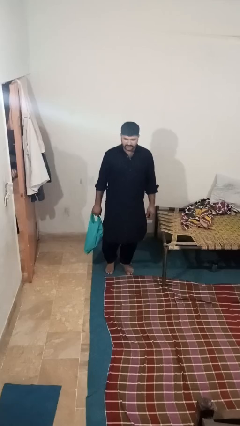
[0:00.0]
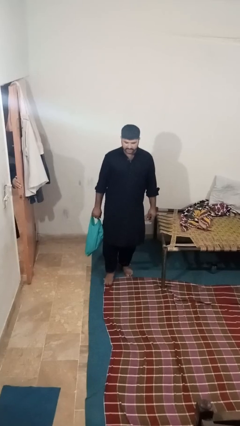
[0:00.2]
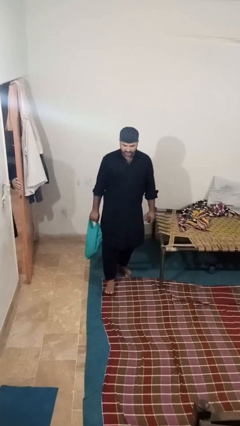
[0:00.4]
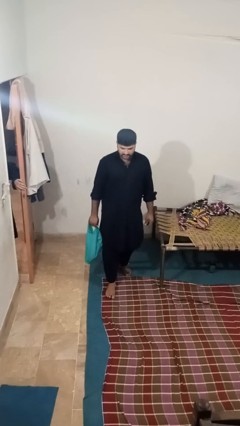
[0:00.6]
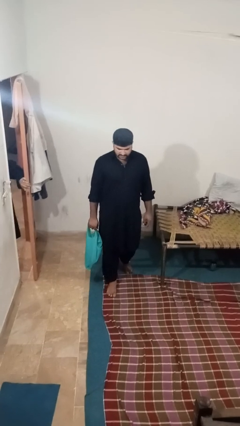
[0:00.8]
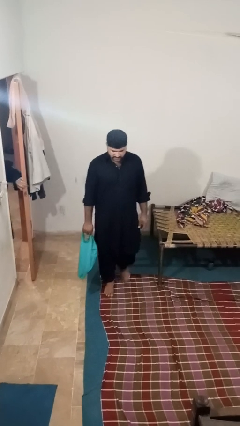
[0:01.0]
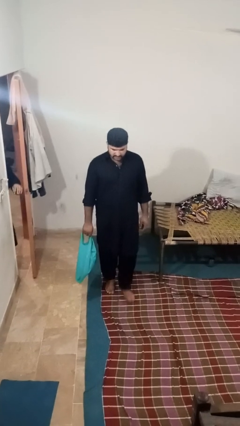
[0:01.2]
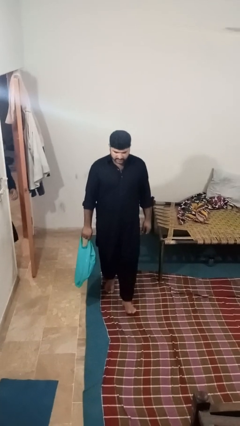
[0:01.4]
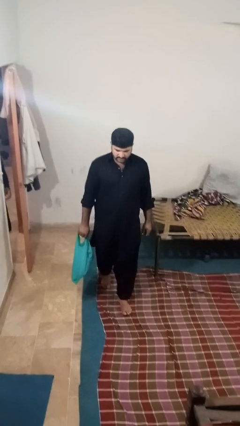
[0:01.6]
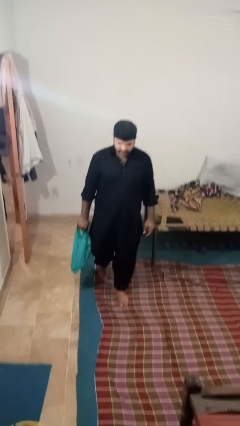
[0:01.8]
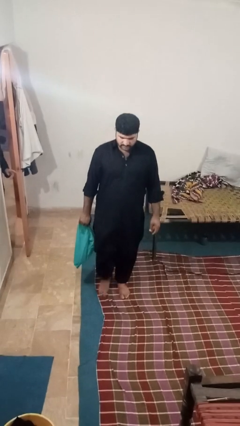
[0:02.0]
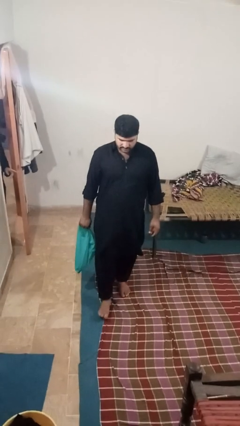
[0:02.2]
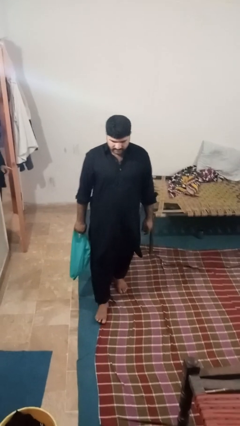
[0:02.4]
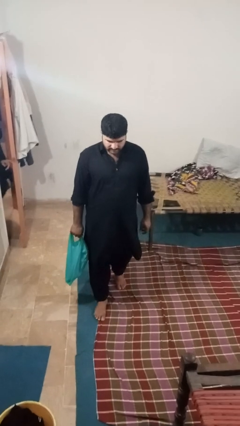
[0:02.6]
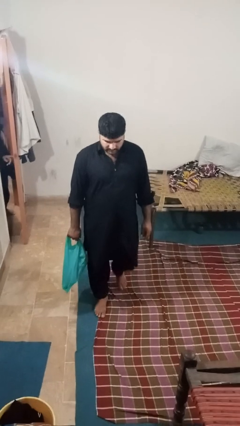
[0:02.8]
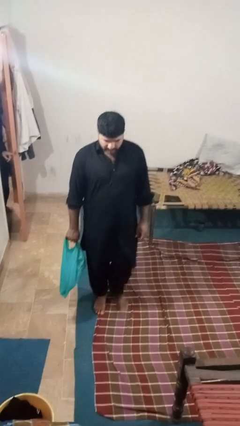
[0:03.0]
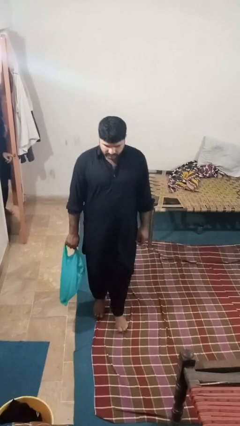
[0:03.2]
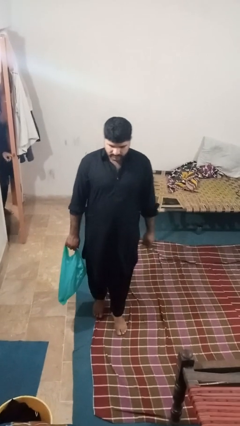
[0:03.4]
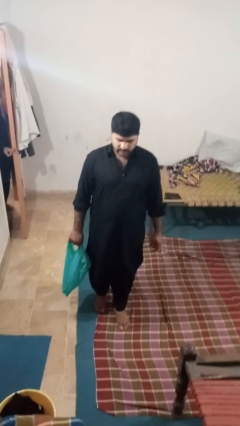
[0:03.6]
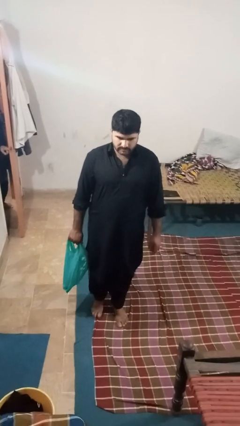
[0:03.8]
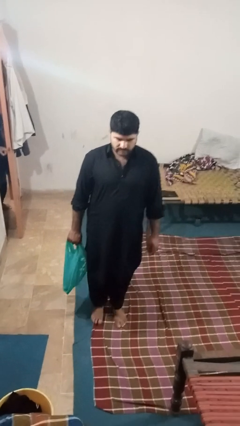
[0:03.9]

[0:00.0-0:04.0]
person carries groceries

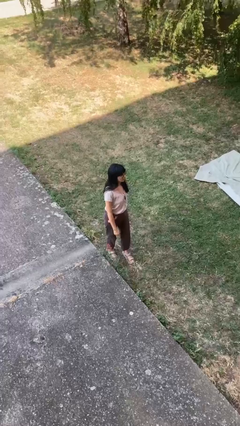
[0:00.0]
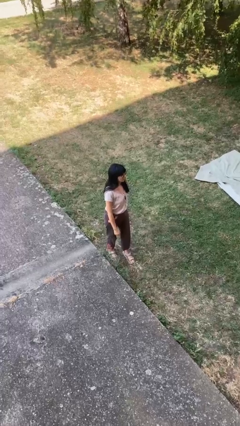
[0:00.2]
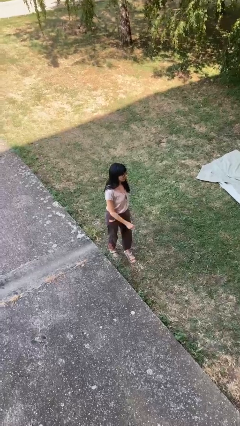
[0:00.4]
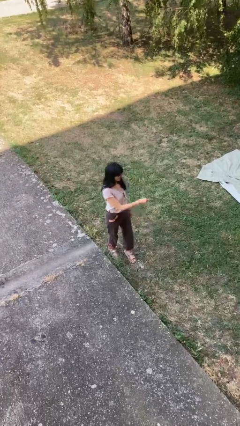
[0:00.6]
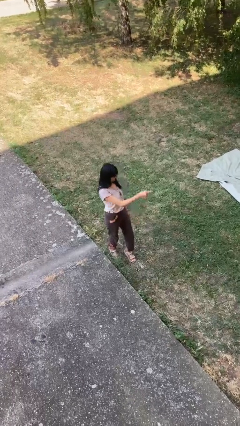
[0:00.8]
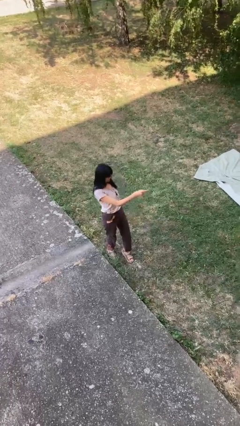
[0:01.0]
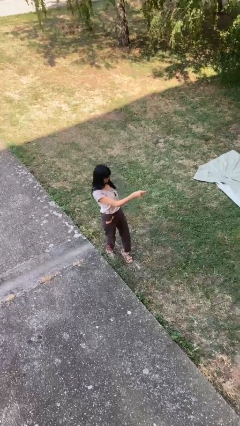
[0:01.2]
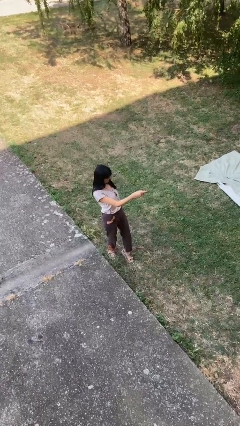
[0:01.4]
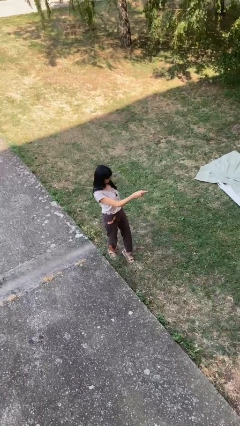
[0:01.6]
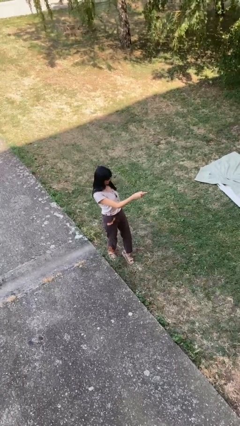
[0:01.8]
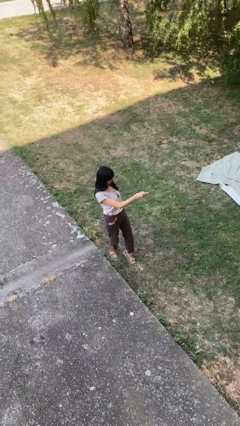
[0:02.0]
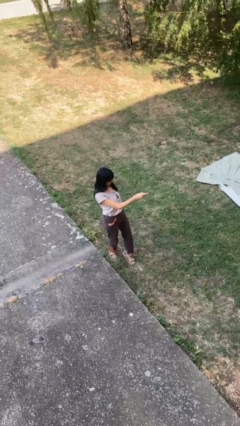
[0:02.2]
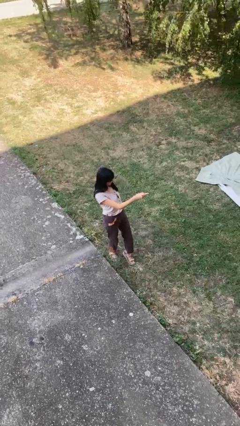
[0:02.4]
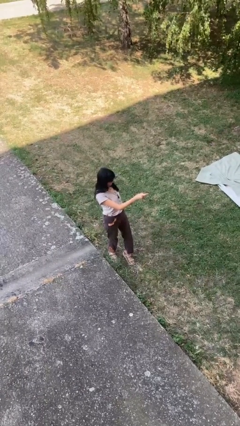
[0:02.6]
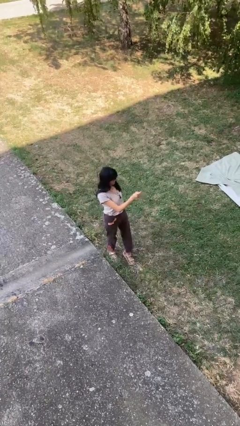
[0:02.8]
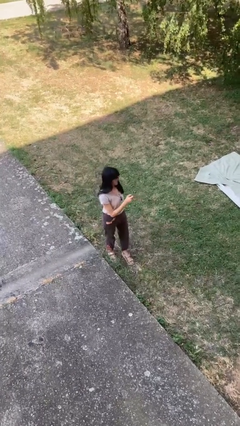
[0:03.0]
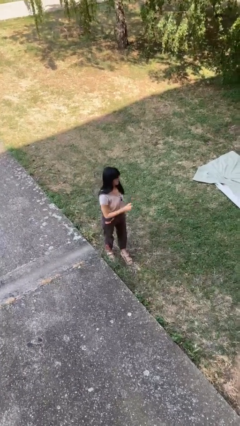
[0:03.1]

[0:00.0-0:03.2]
person points at person

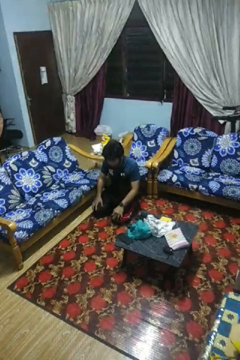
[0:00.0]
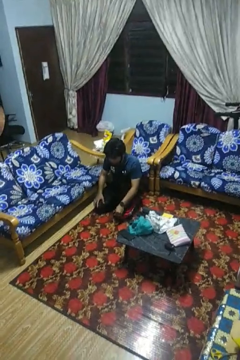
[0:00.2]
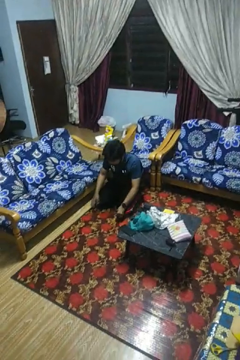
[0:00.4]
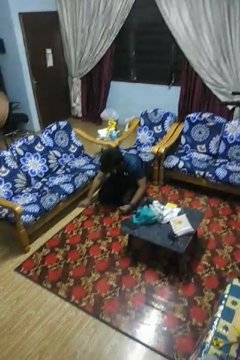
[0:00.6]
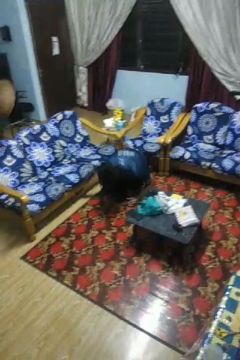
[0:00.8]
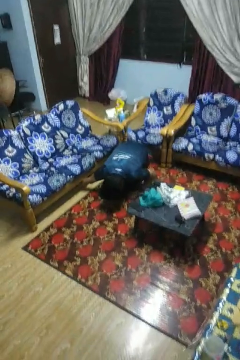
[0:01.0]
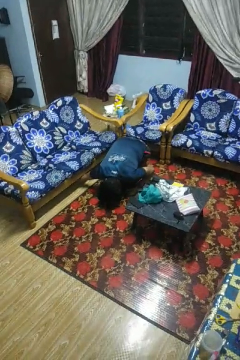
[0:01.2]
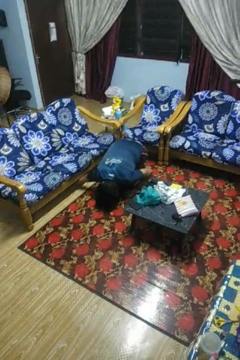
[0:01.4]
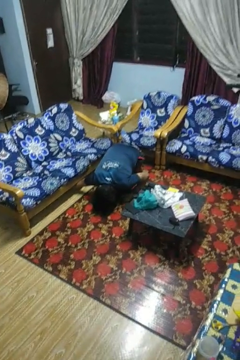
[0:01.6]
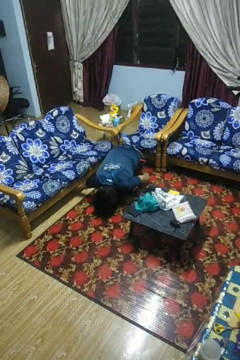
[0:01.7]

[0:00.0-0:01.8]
person searches under couch

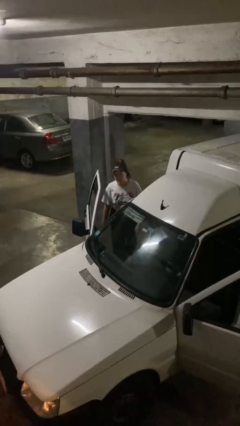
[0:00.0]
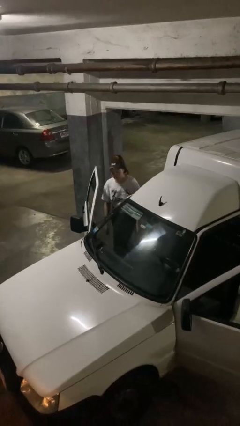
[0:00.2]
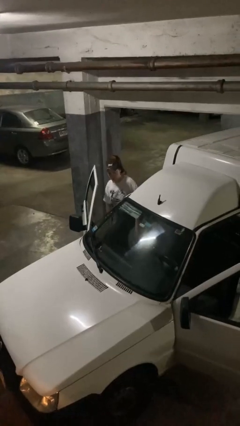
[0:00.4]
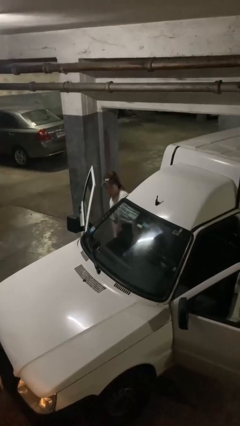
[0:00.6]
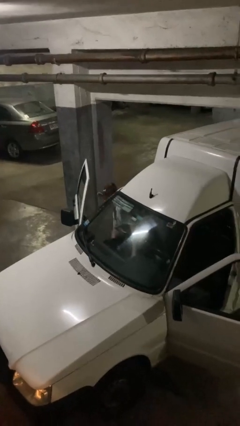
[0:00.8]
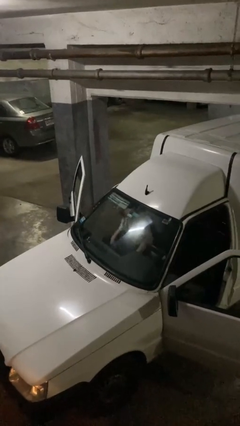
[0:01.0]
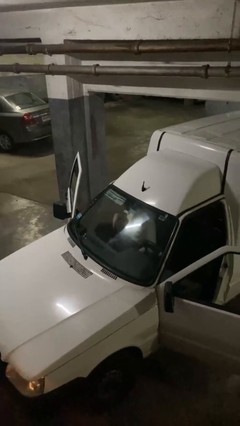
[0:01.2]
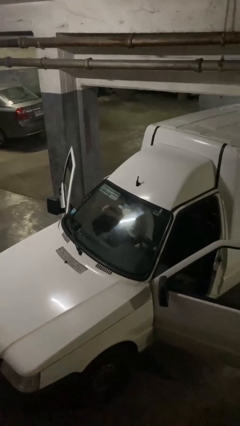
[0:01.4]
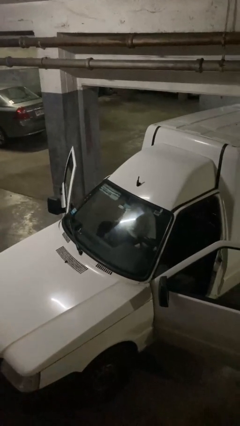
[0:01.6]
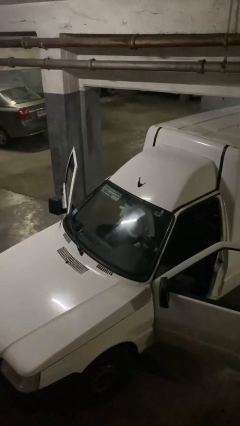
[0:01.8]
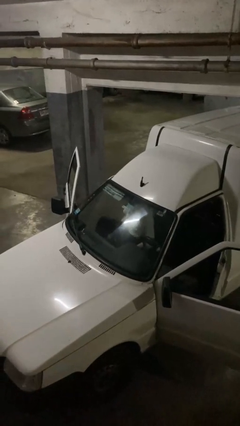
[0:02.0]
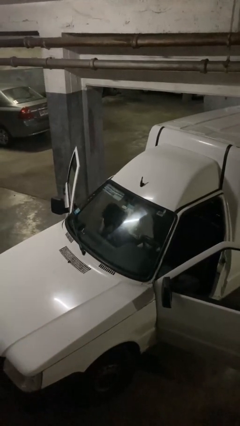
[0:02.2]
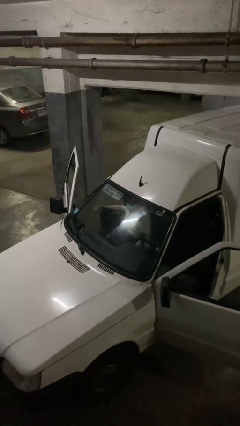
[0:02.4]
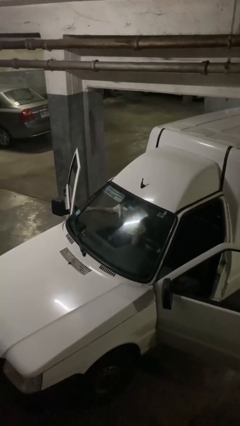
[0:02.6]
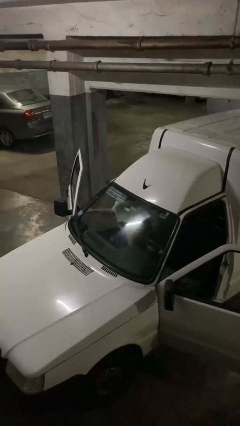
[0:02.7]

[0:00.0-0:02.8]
person enters car

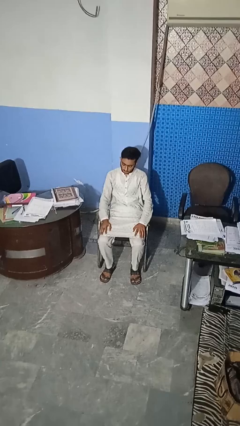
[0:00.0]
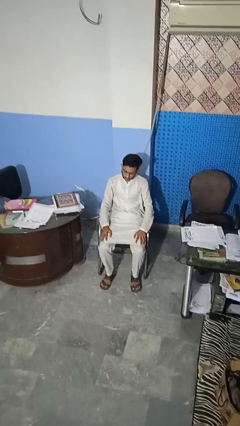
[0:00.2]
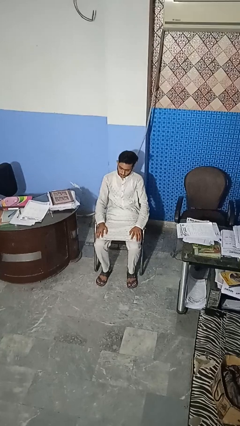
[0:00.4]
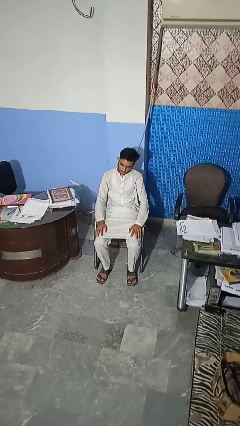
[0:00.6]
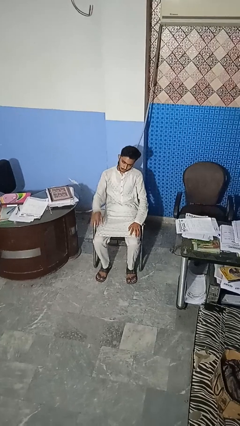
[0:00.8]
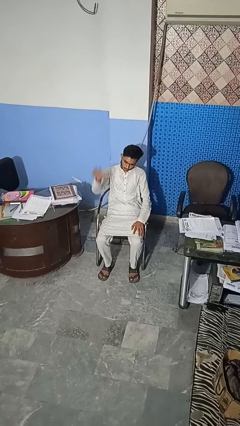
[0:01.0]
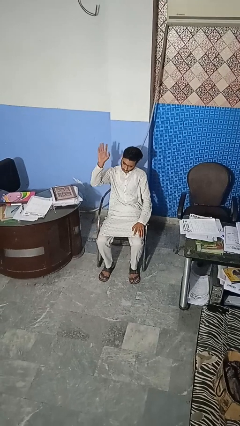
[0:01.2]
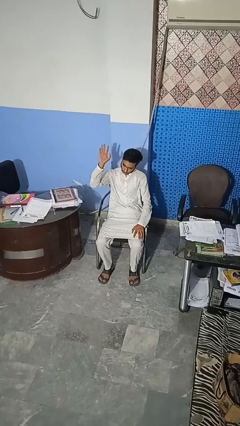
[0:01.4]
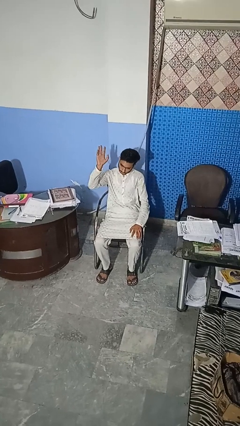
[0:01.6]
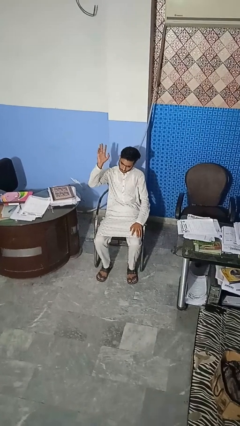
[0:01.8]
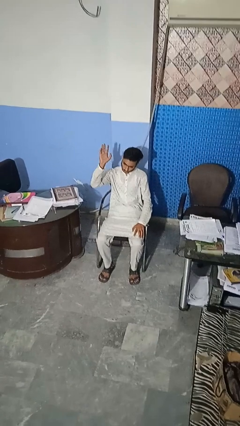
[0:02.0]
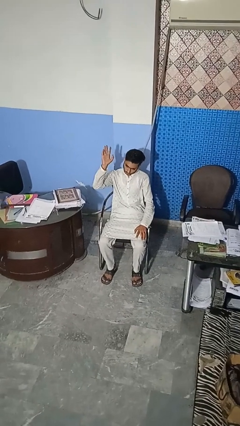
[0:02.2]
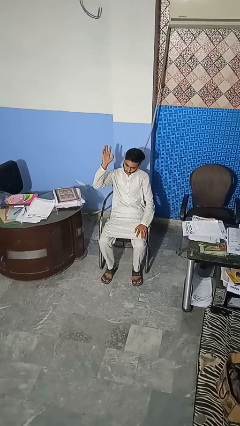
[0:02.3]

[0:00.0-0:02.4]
person gestures raise hand

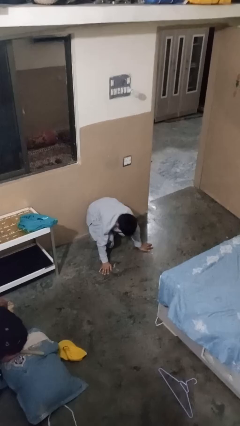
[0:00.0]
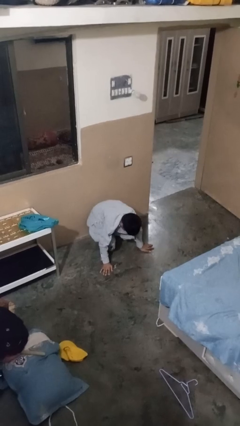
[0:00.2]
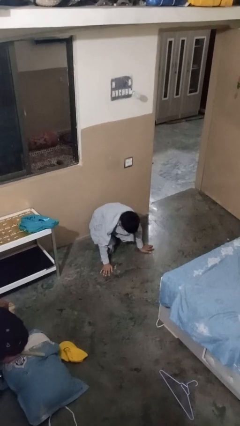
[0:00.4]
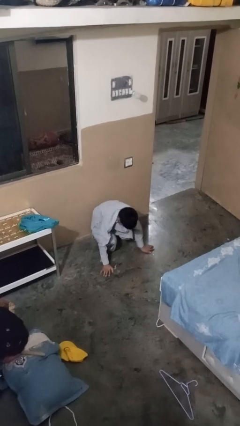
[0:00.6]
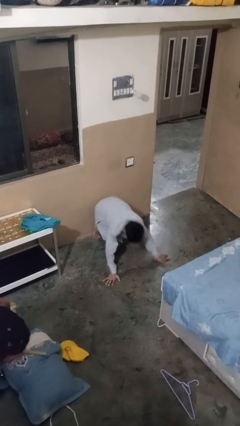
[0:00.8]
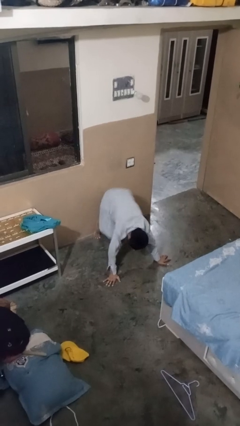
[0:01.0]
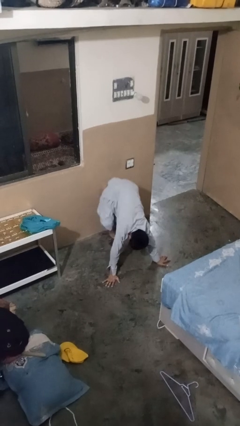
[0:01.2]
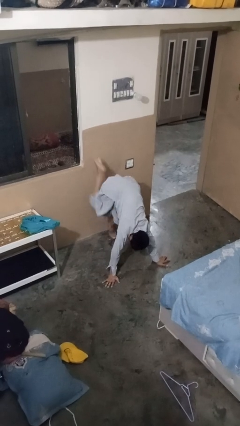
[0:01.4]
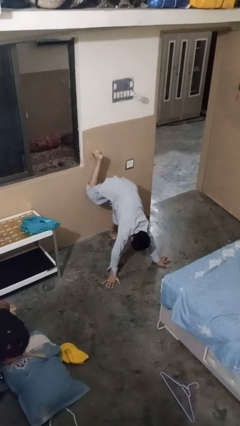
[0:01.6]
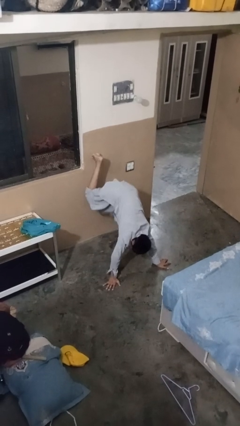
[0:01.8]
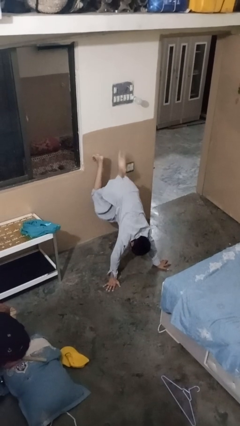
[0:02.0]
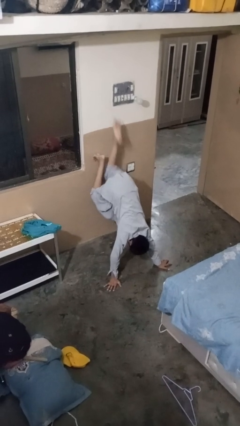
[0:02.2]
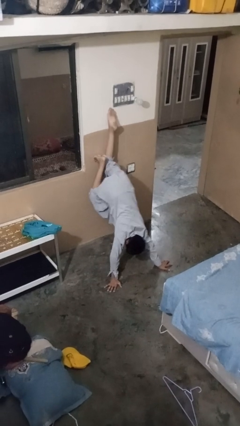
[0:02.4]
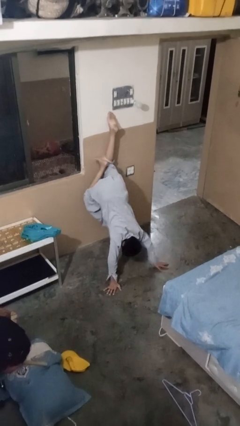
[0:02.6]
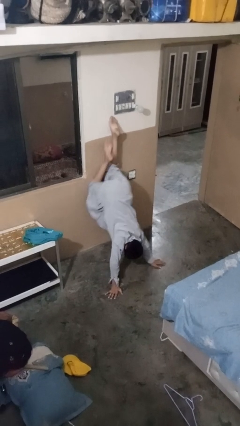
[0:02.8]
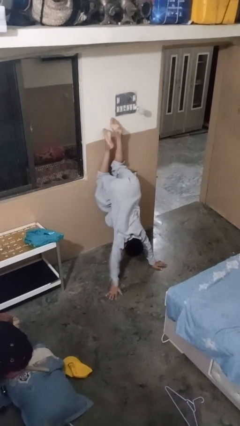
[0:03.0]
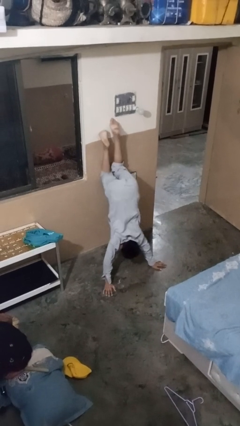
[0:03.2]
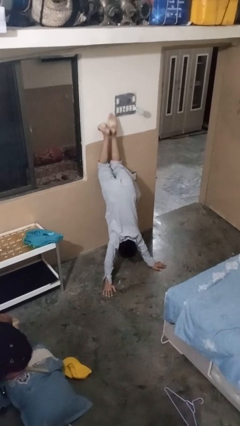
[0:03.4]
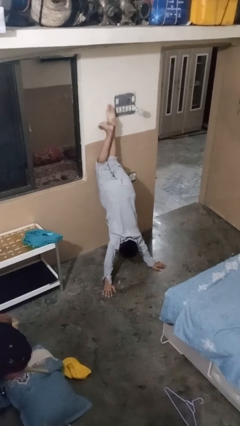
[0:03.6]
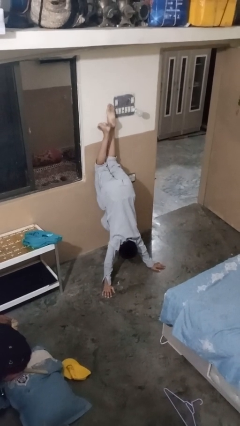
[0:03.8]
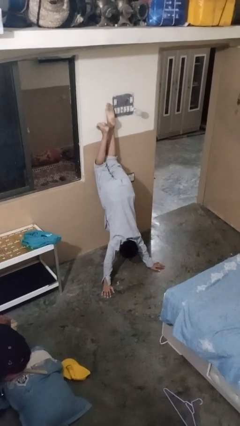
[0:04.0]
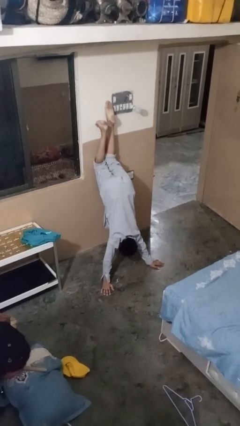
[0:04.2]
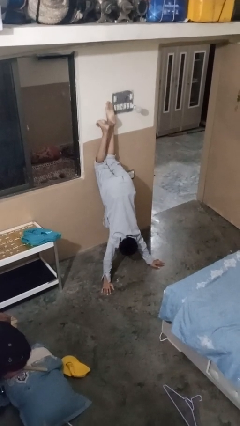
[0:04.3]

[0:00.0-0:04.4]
person handstand
